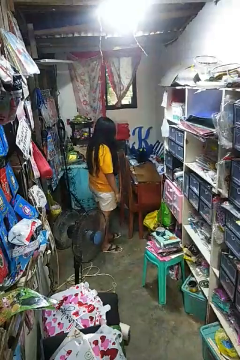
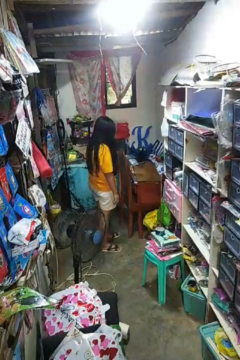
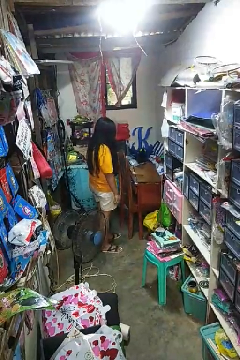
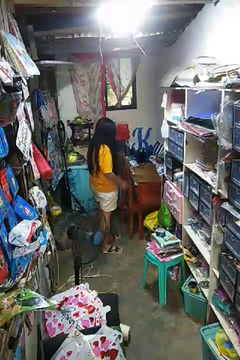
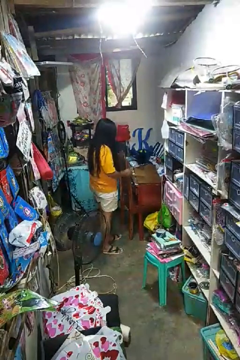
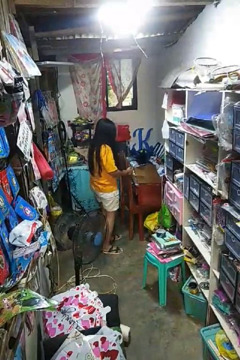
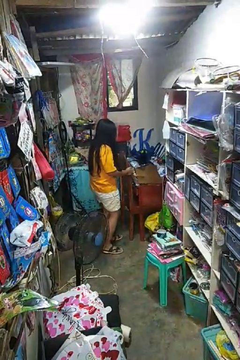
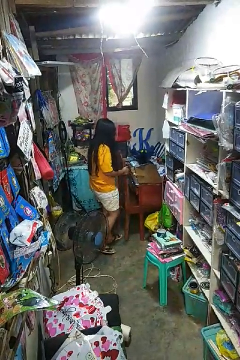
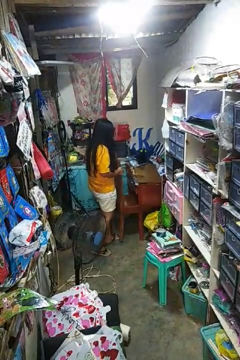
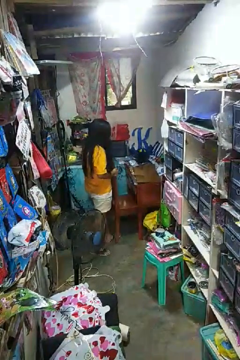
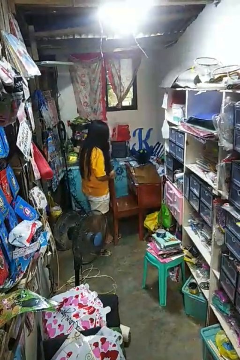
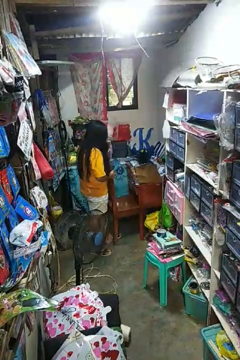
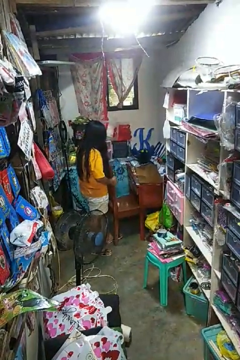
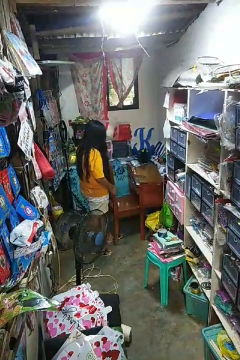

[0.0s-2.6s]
person pulls out chair

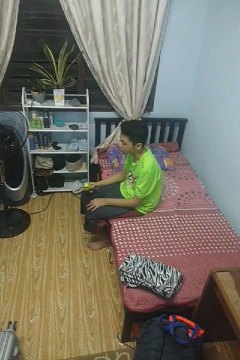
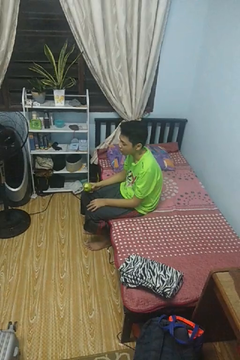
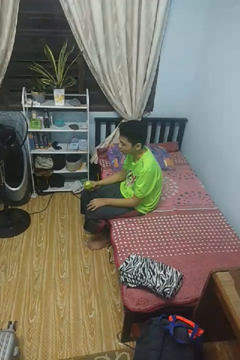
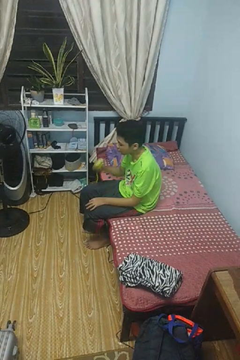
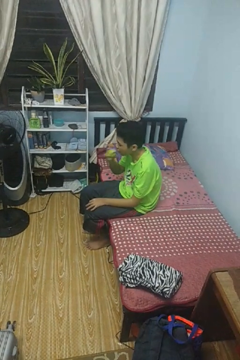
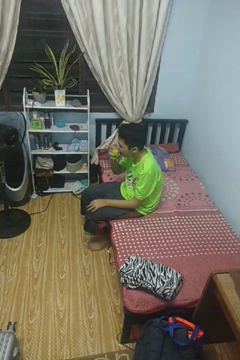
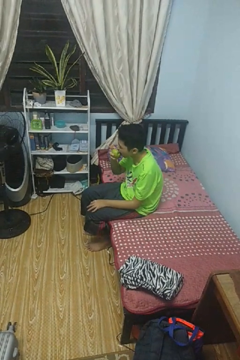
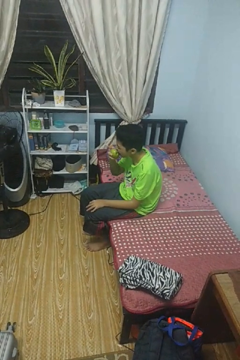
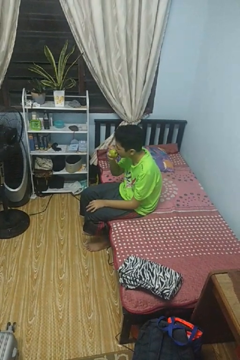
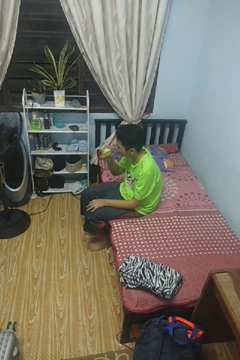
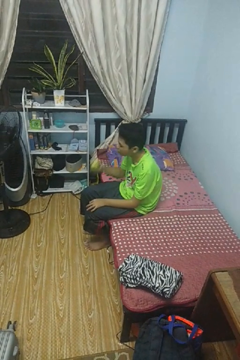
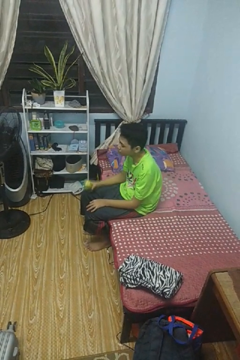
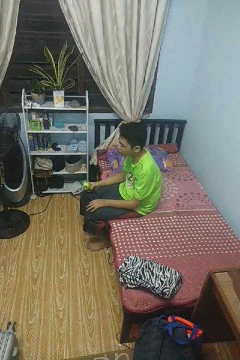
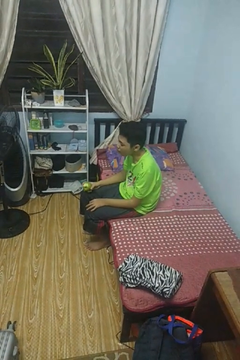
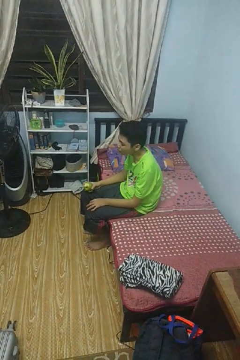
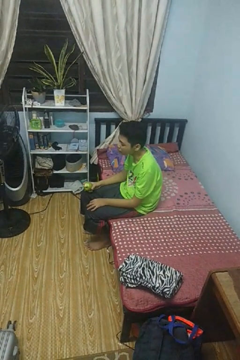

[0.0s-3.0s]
person eats apple

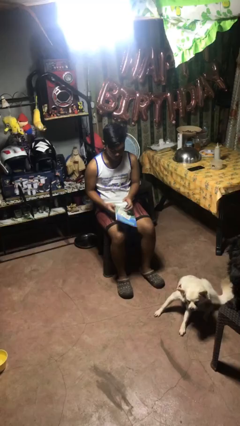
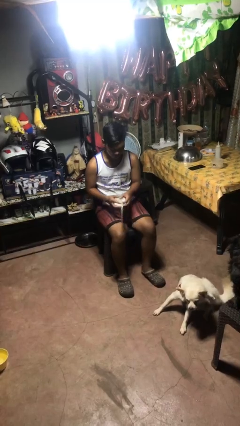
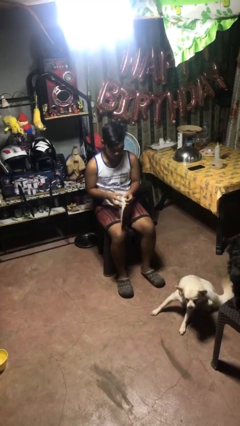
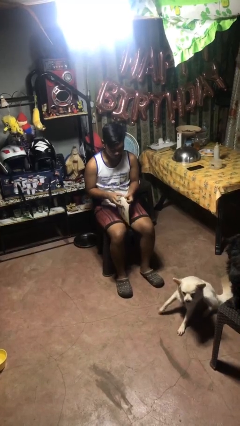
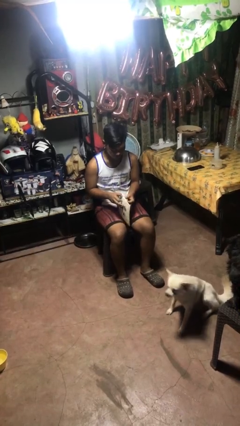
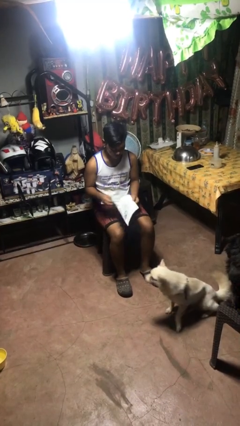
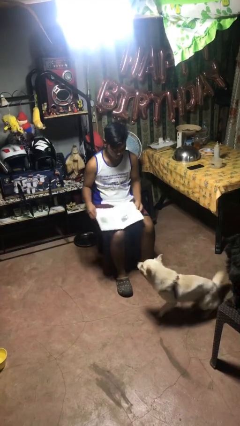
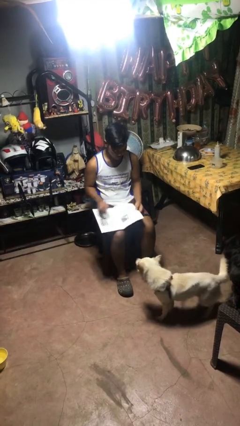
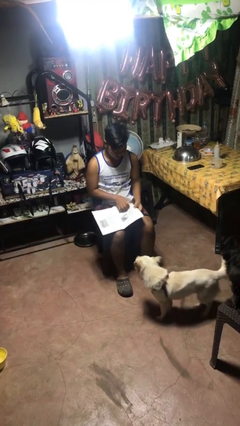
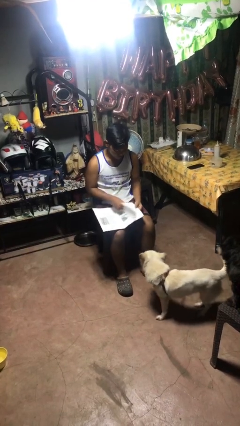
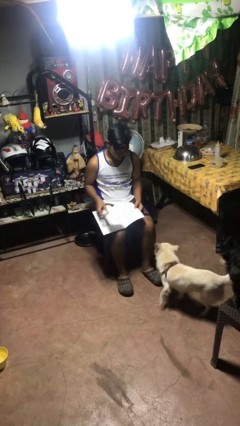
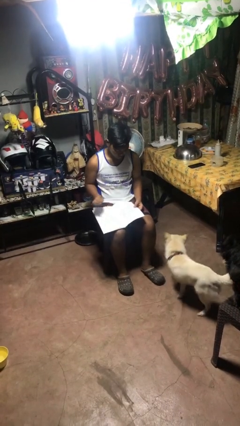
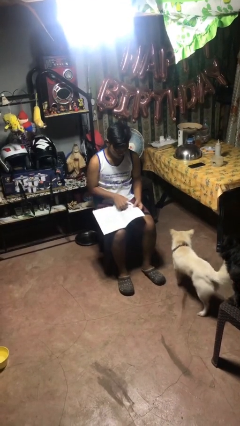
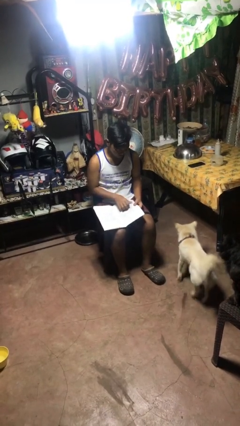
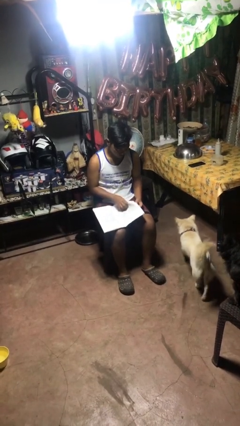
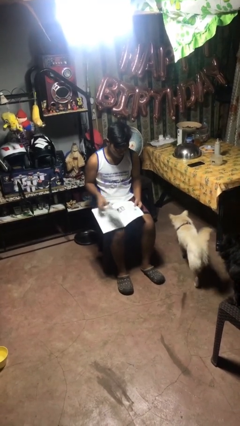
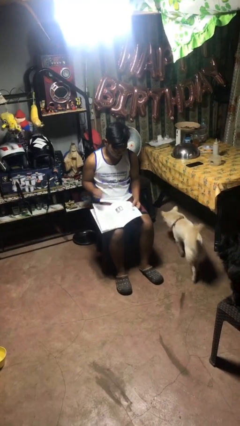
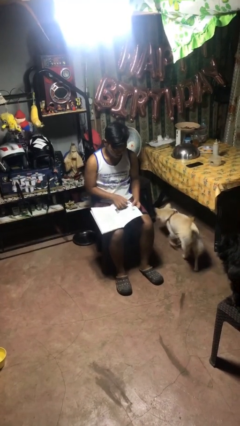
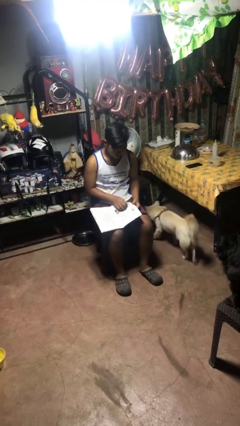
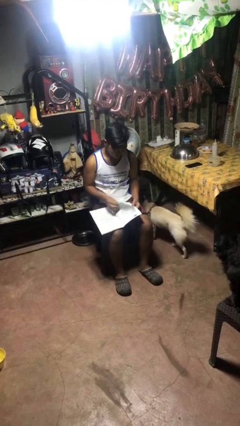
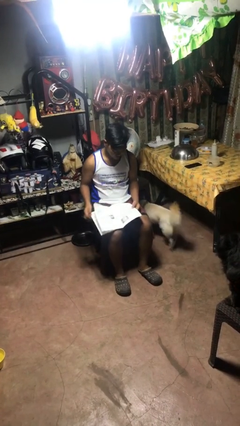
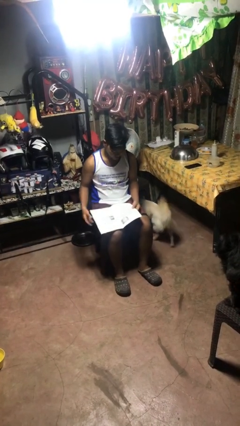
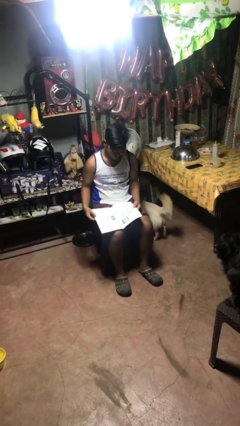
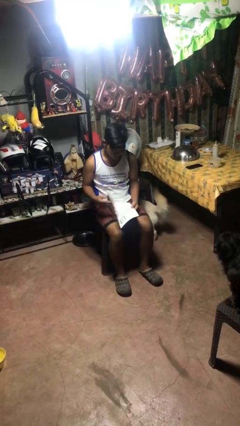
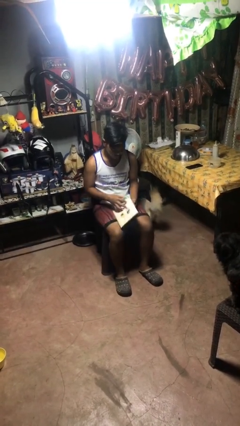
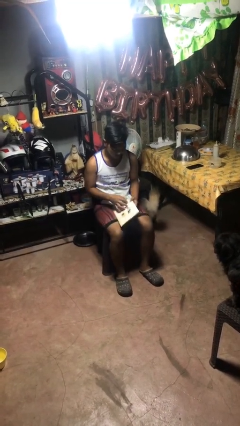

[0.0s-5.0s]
person reads magazine

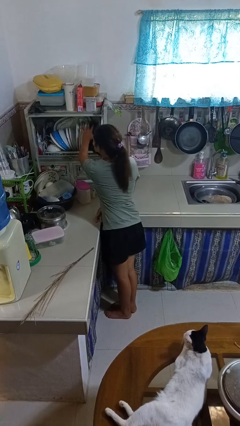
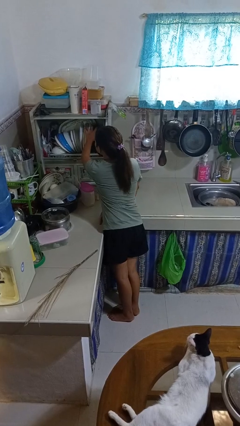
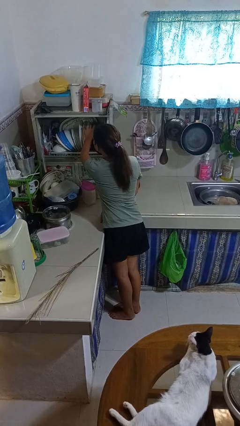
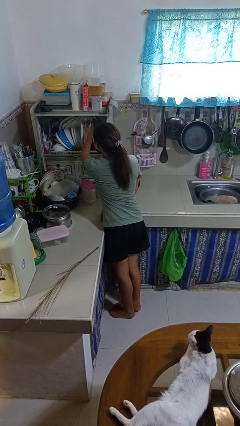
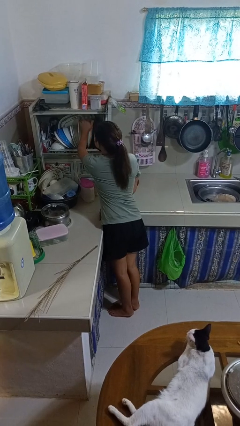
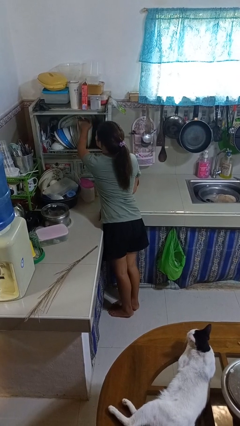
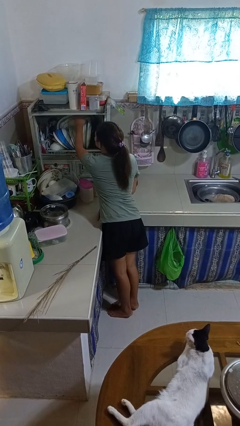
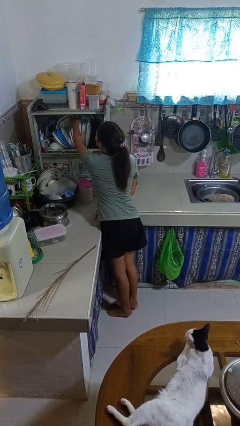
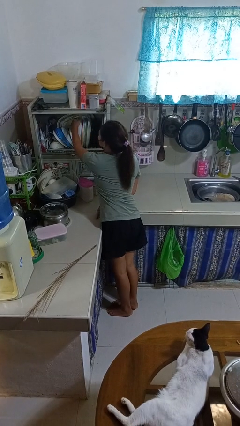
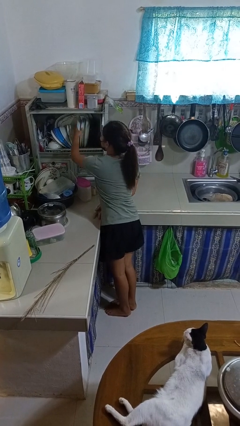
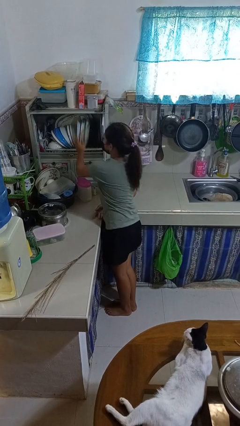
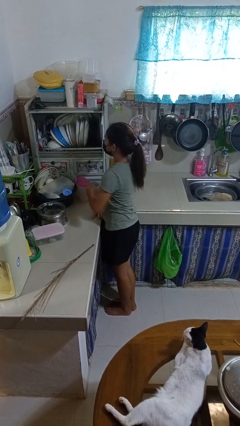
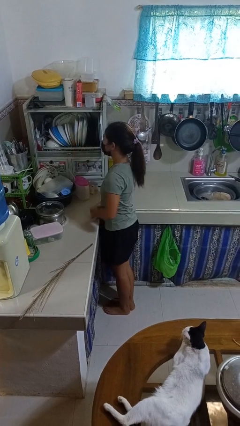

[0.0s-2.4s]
person searches in kitchen drawer

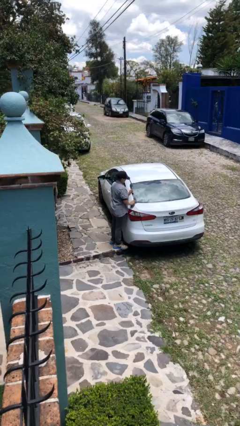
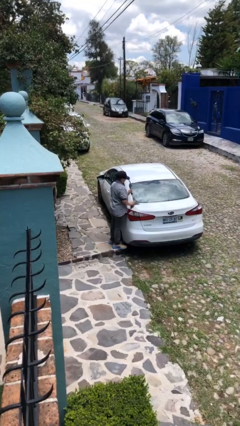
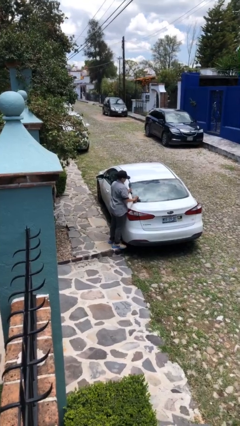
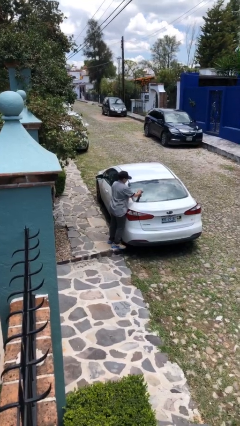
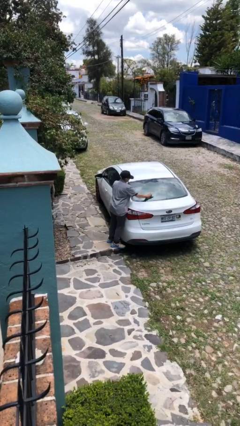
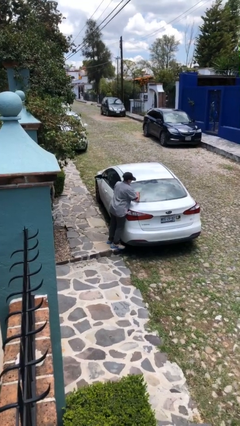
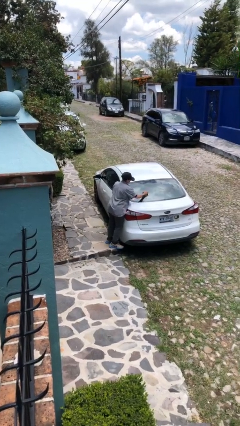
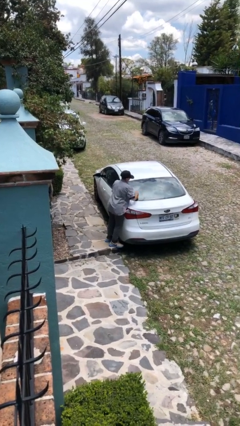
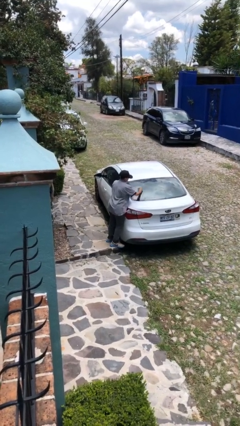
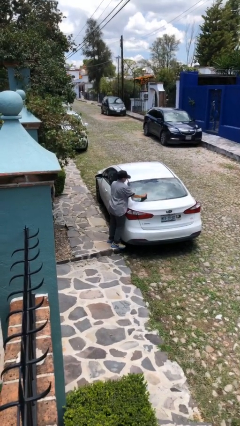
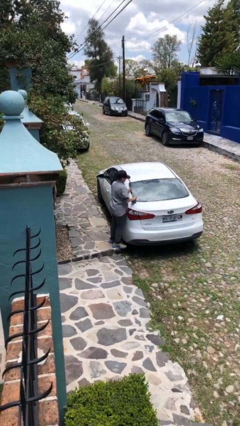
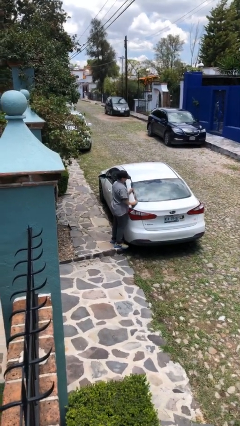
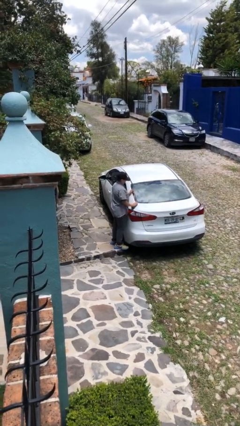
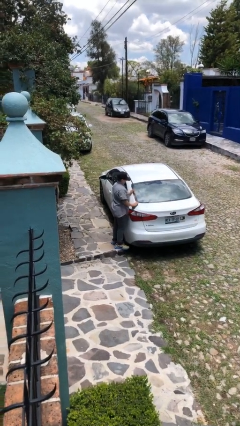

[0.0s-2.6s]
person polishes car with rag

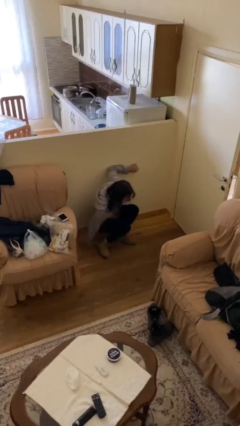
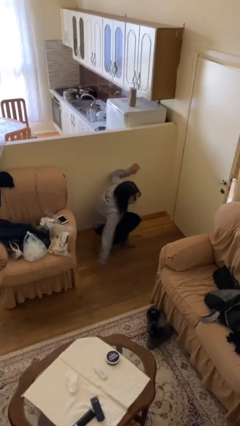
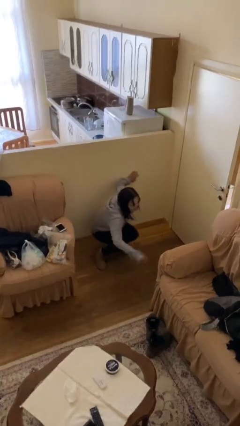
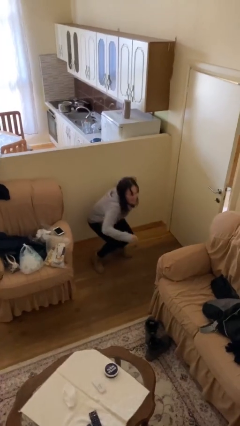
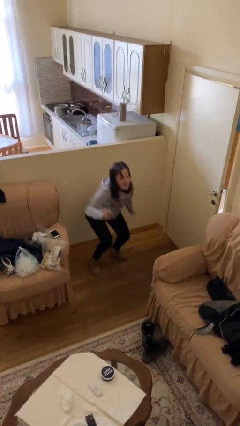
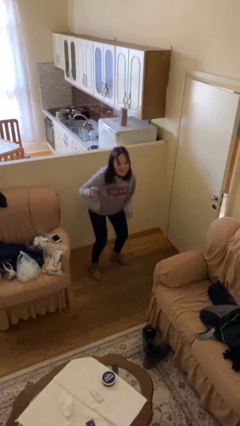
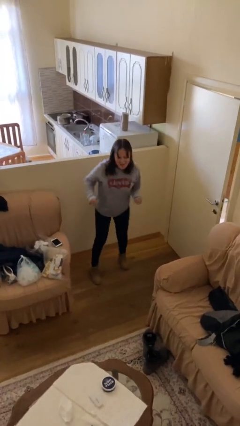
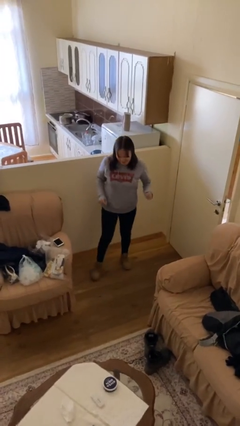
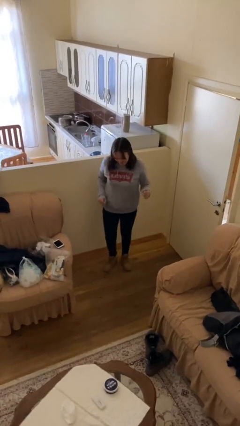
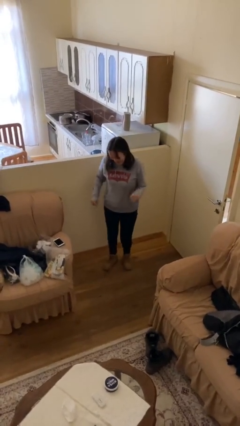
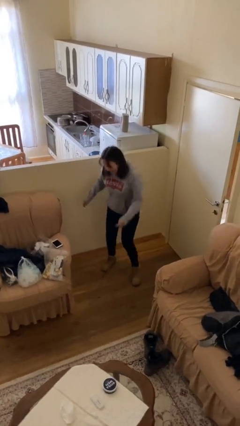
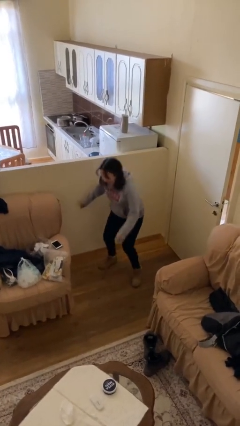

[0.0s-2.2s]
person stands up

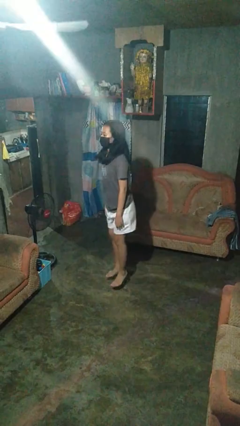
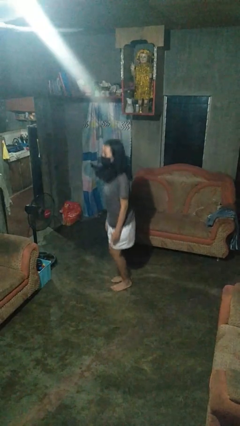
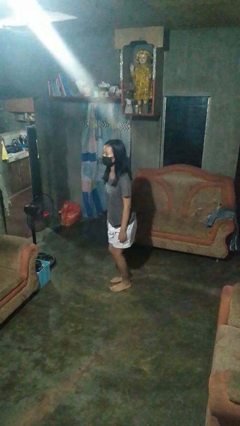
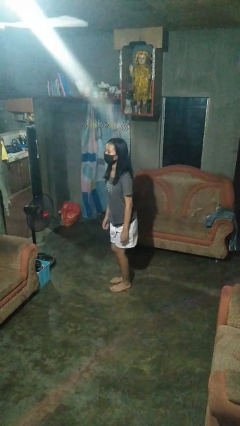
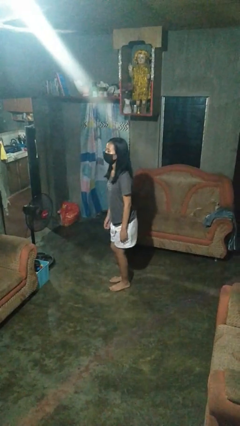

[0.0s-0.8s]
person jumps
